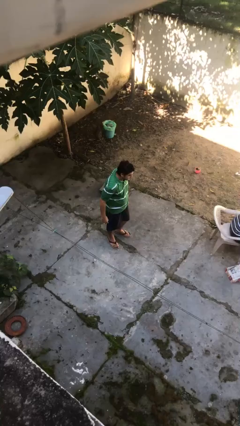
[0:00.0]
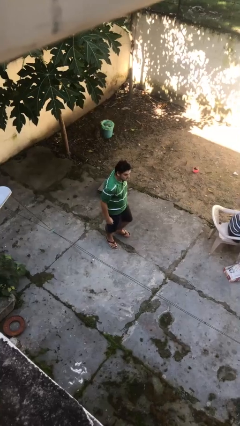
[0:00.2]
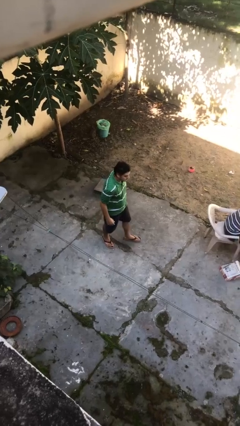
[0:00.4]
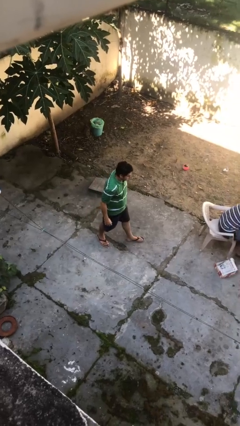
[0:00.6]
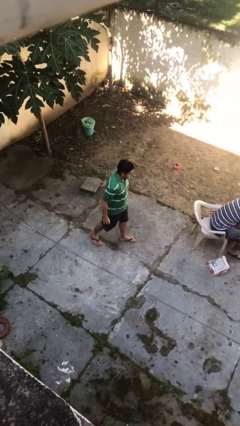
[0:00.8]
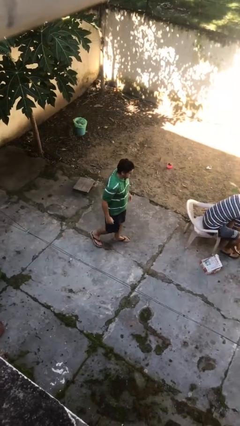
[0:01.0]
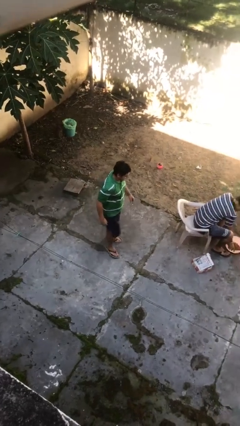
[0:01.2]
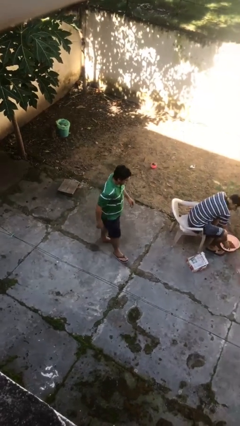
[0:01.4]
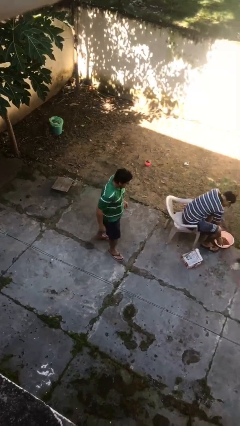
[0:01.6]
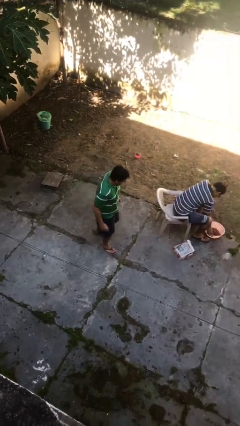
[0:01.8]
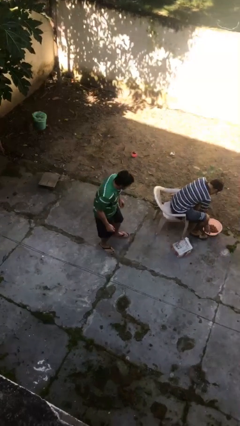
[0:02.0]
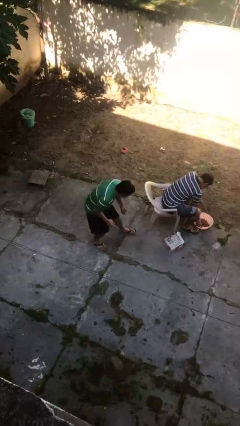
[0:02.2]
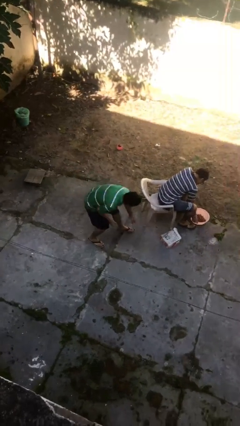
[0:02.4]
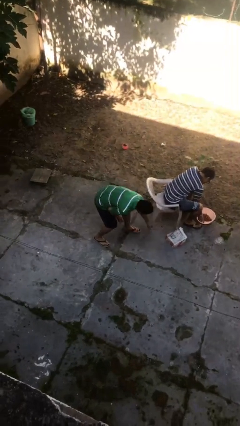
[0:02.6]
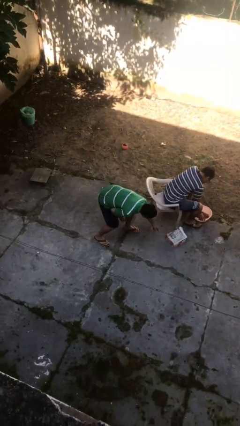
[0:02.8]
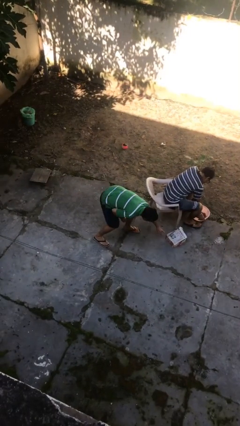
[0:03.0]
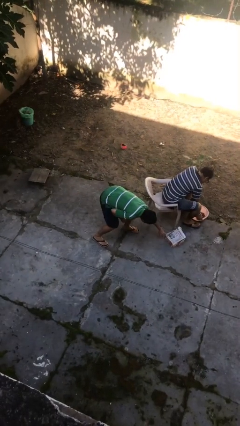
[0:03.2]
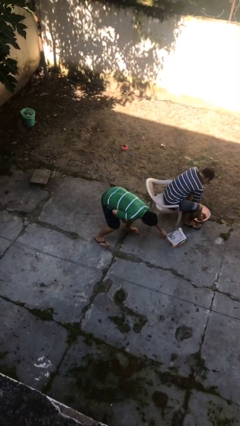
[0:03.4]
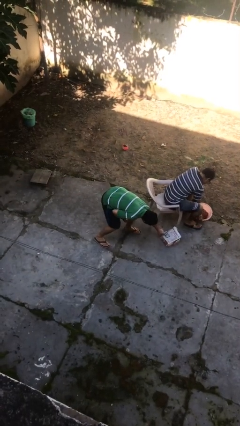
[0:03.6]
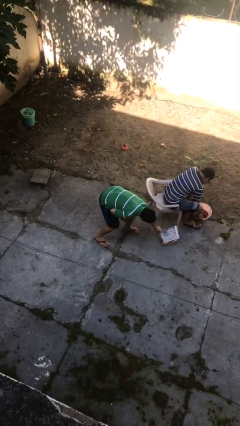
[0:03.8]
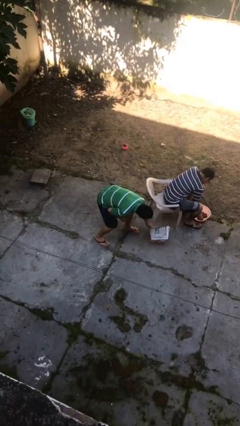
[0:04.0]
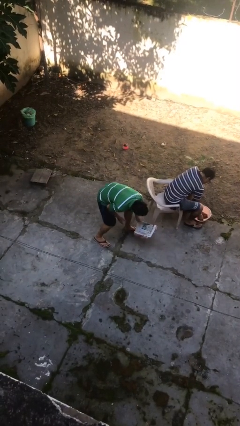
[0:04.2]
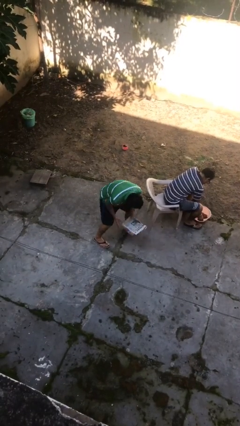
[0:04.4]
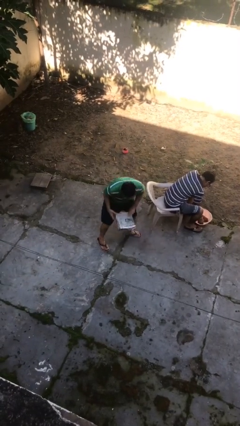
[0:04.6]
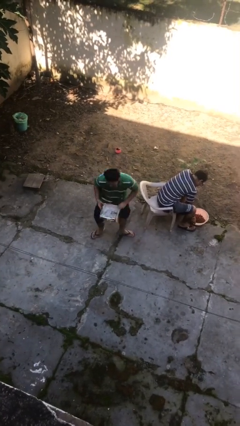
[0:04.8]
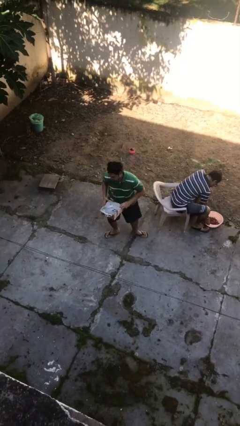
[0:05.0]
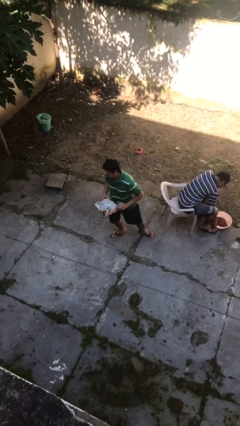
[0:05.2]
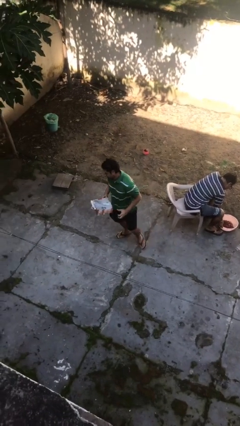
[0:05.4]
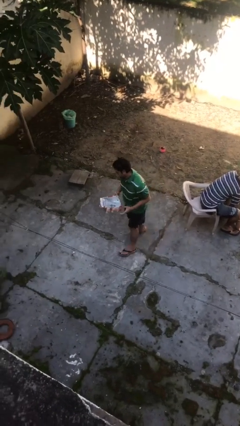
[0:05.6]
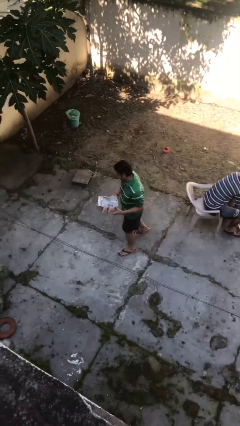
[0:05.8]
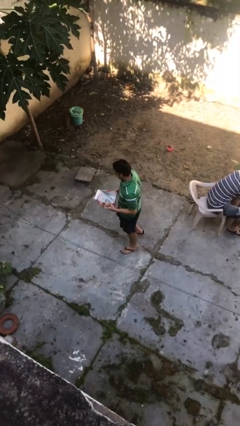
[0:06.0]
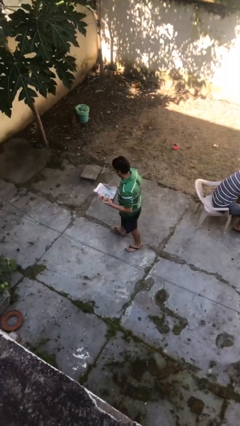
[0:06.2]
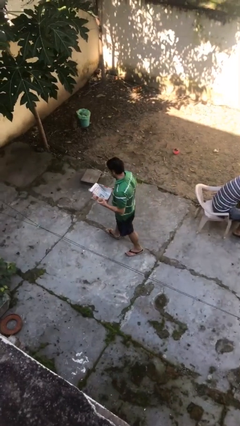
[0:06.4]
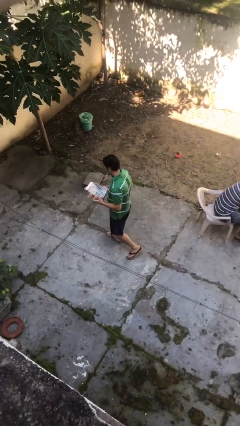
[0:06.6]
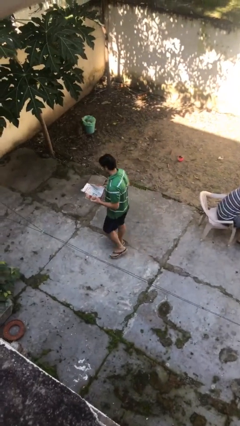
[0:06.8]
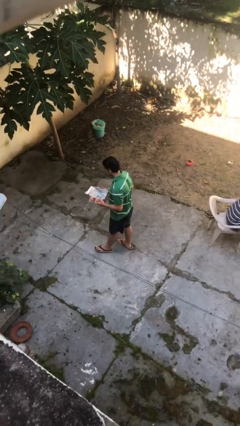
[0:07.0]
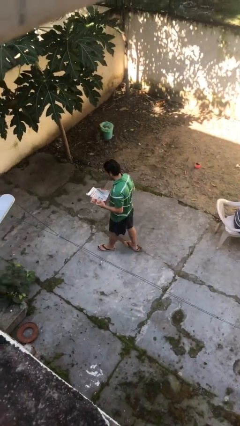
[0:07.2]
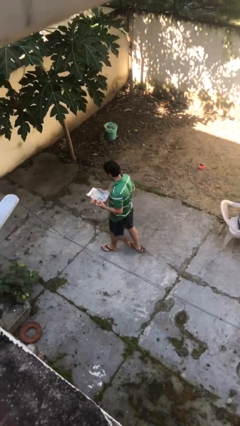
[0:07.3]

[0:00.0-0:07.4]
person steals object from person

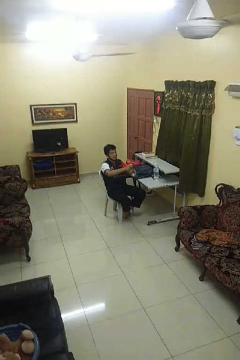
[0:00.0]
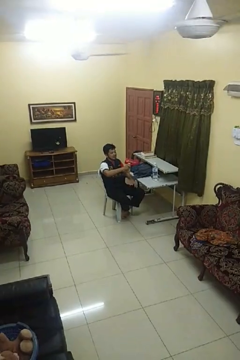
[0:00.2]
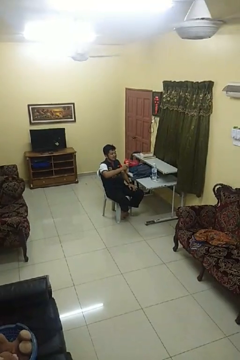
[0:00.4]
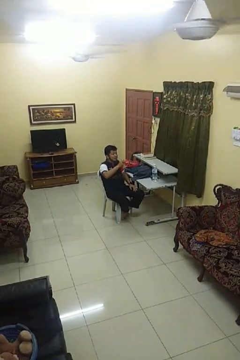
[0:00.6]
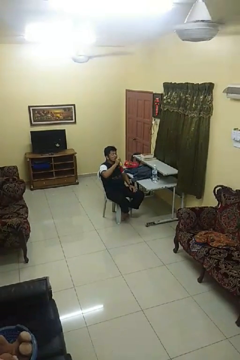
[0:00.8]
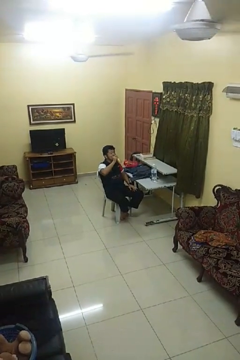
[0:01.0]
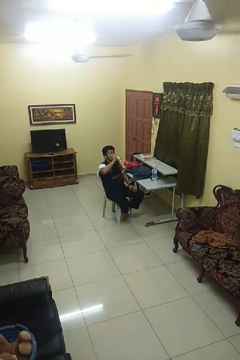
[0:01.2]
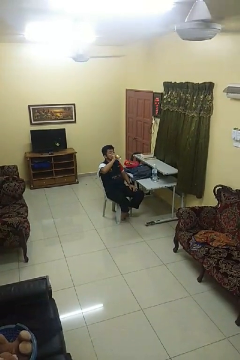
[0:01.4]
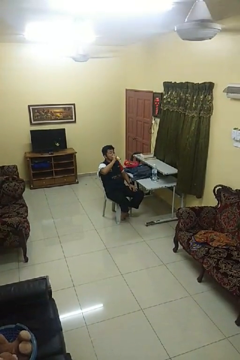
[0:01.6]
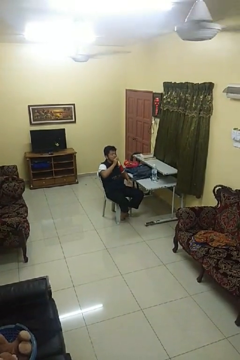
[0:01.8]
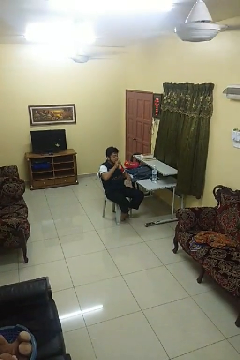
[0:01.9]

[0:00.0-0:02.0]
person drinks from beverage can

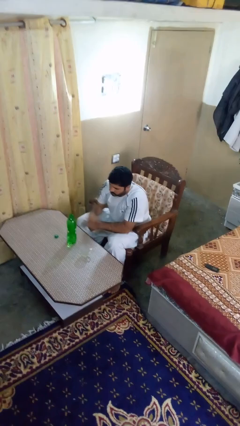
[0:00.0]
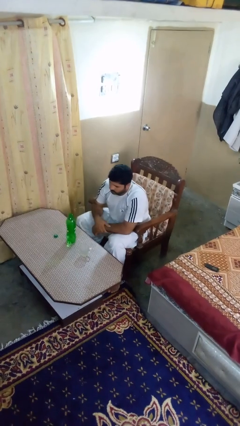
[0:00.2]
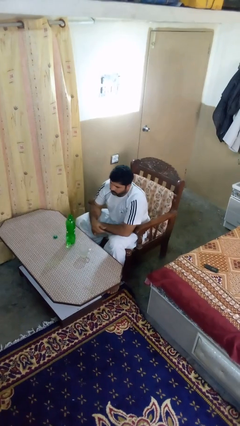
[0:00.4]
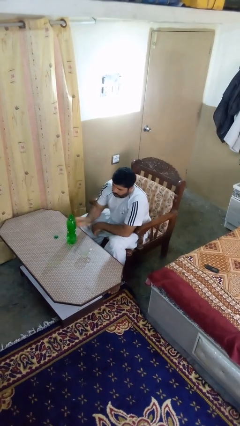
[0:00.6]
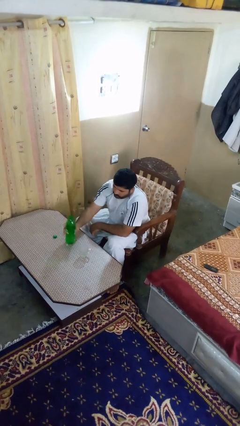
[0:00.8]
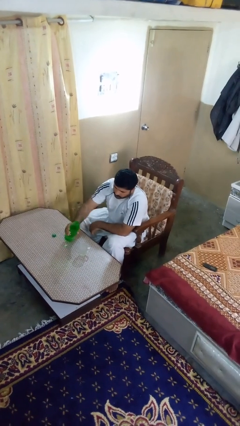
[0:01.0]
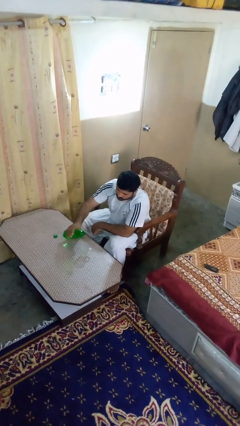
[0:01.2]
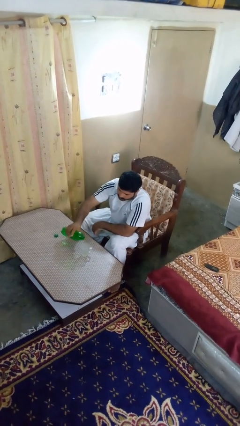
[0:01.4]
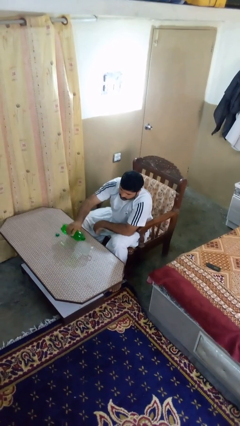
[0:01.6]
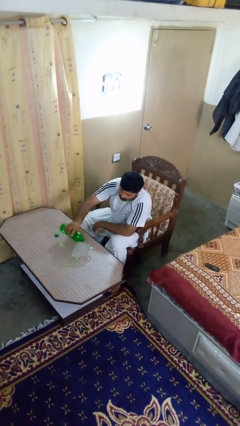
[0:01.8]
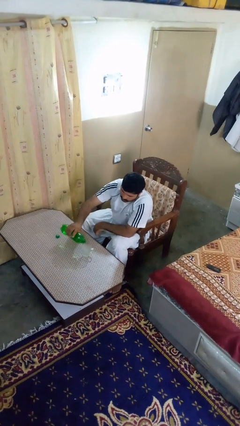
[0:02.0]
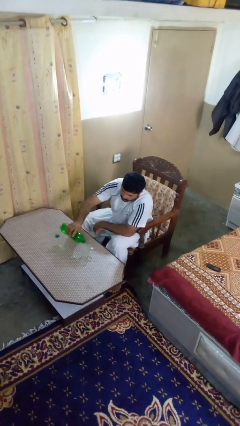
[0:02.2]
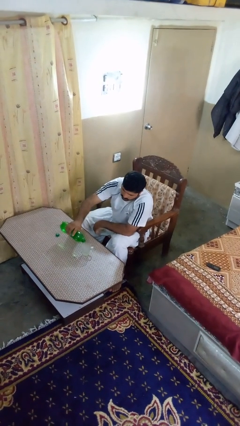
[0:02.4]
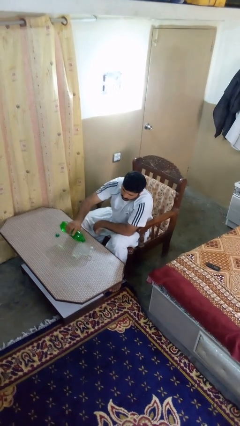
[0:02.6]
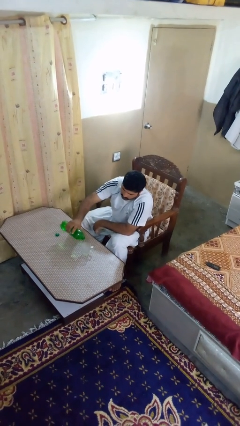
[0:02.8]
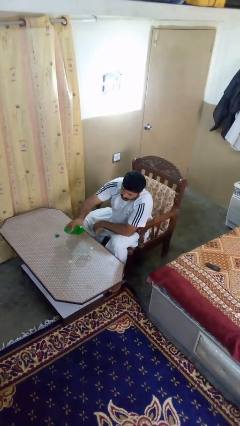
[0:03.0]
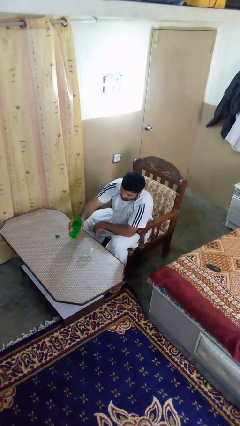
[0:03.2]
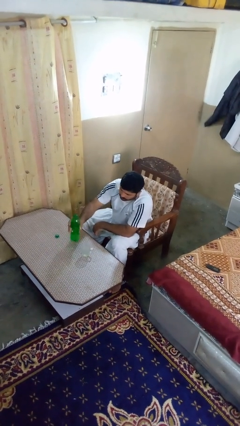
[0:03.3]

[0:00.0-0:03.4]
person pours liquid into cup

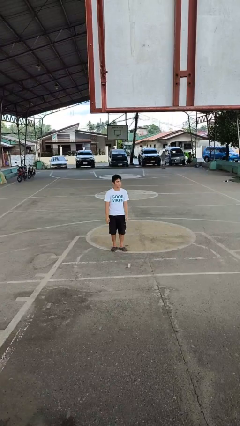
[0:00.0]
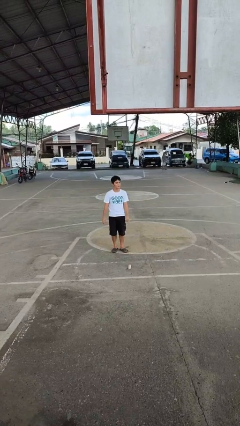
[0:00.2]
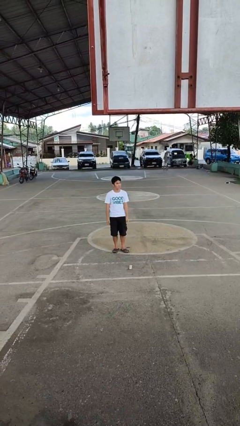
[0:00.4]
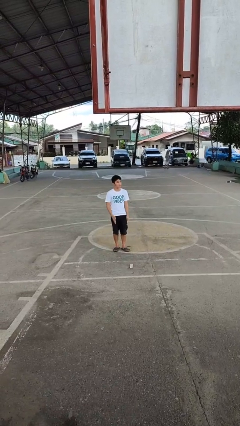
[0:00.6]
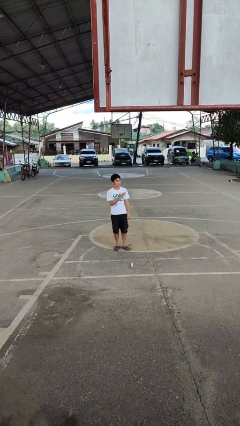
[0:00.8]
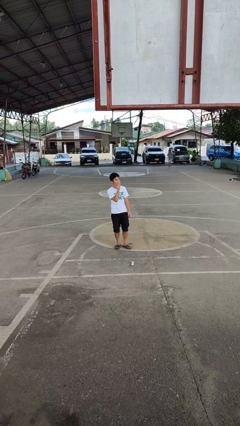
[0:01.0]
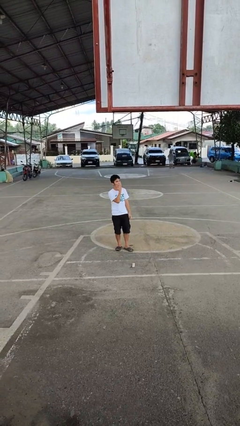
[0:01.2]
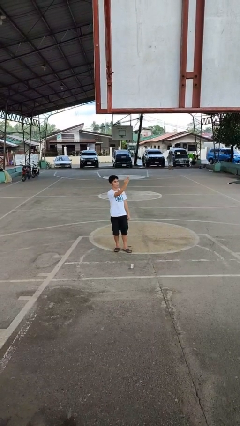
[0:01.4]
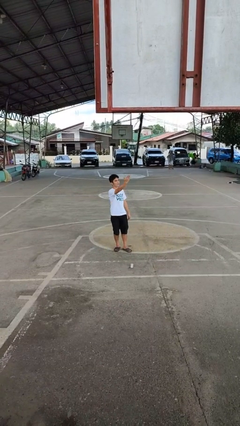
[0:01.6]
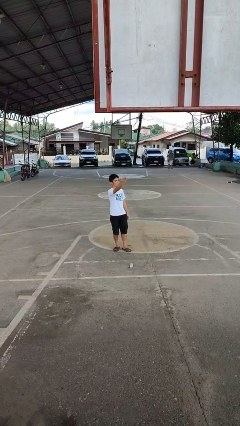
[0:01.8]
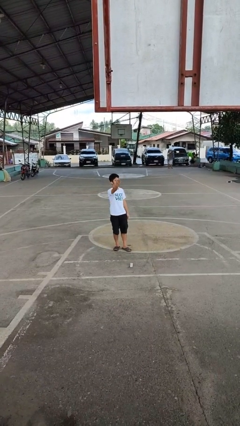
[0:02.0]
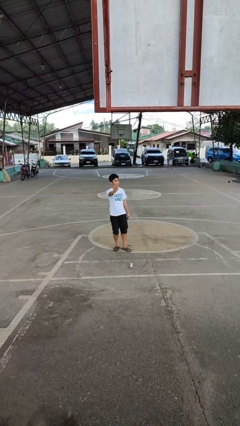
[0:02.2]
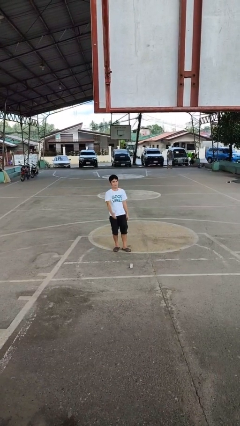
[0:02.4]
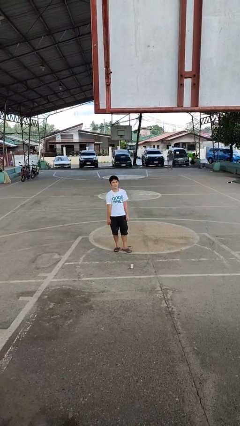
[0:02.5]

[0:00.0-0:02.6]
person gestures blow kiss

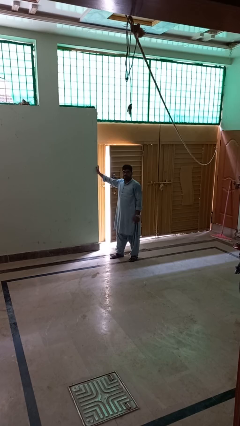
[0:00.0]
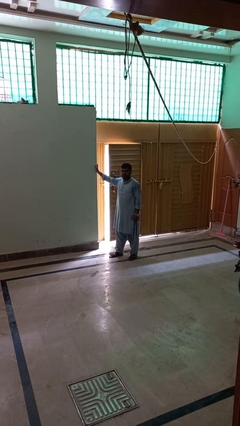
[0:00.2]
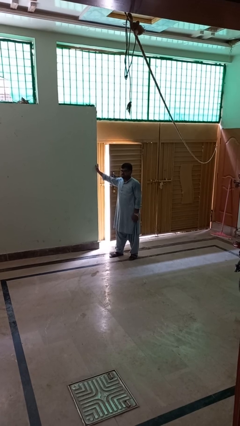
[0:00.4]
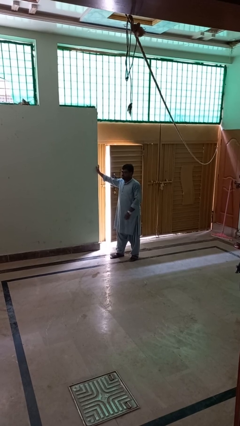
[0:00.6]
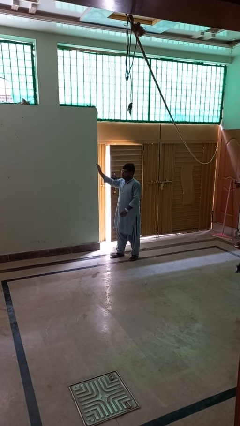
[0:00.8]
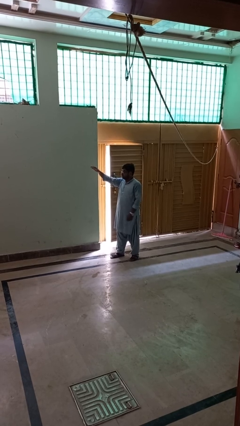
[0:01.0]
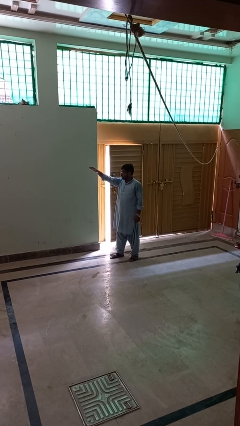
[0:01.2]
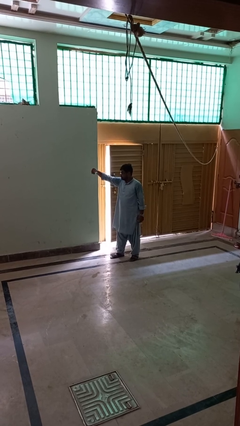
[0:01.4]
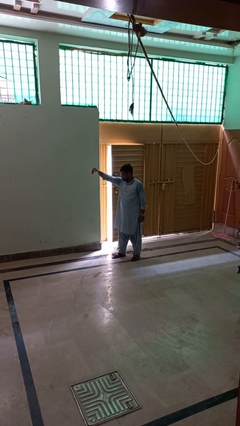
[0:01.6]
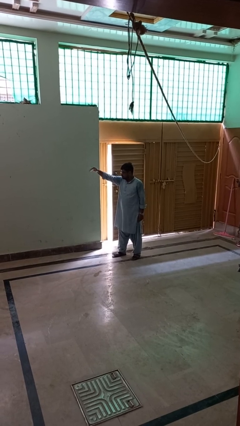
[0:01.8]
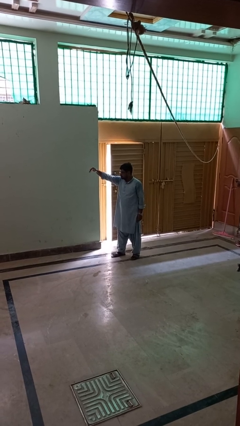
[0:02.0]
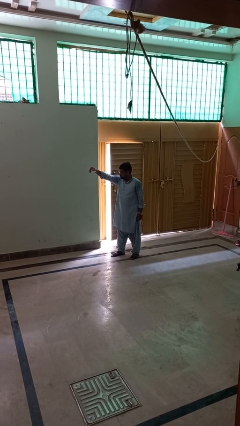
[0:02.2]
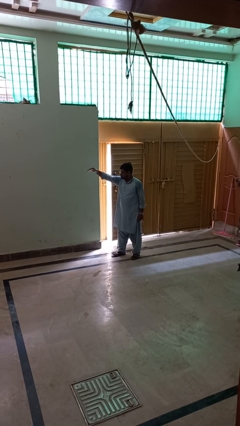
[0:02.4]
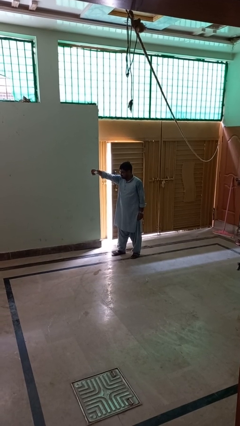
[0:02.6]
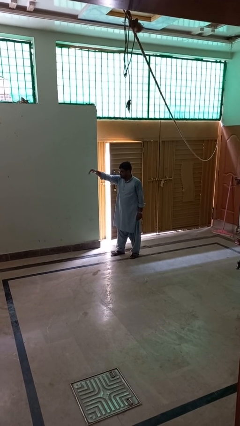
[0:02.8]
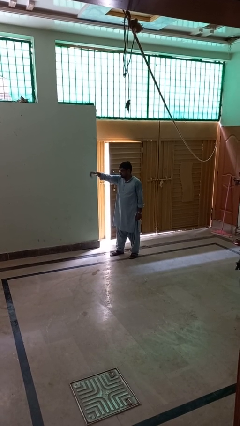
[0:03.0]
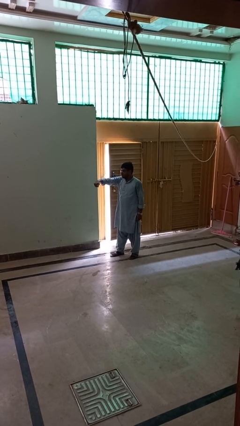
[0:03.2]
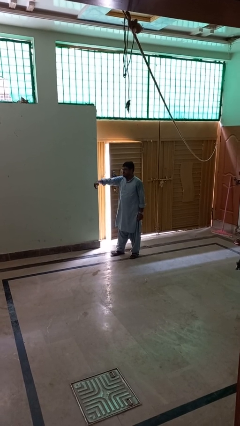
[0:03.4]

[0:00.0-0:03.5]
person gestures come here
